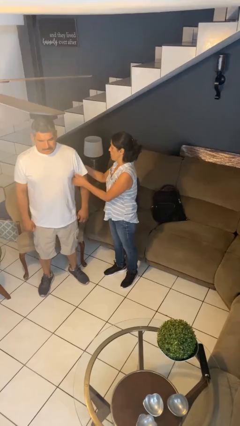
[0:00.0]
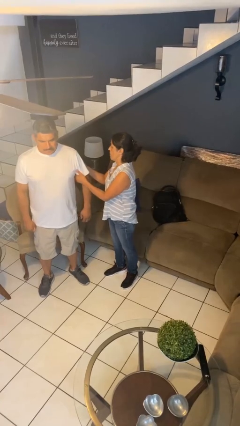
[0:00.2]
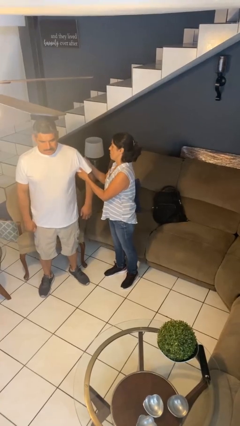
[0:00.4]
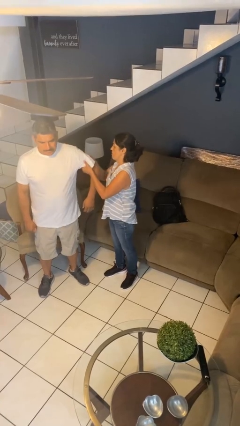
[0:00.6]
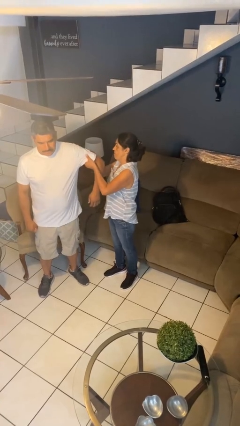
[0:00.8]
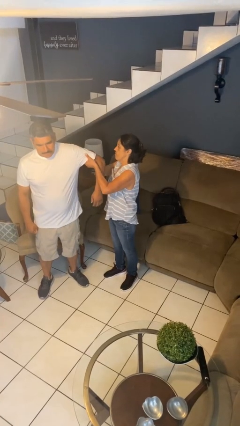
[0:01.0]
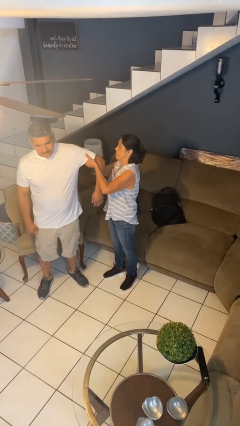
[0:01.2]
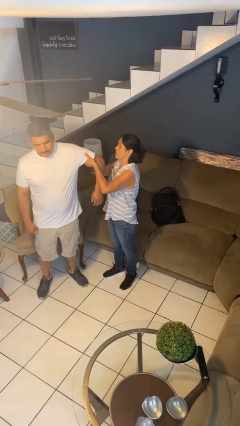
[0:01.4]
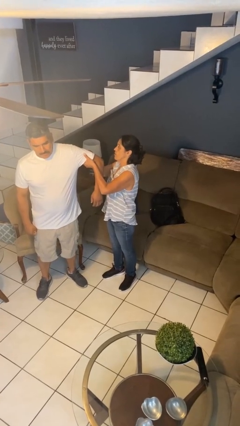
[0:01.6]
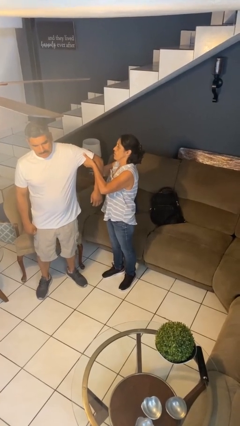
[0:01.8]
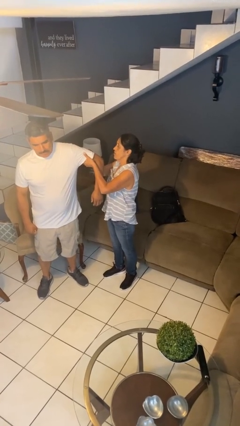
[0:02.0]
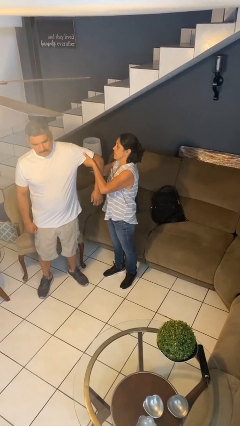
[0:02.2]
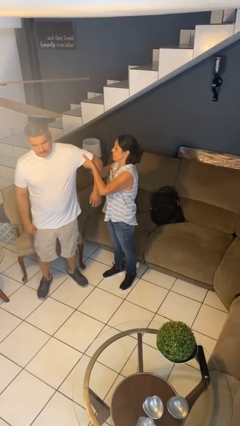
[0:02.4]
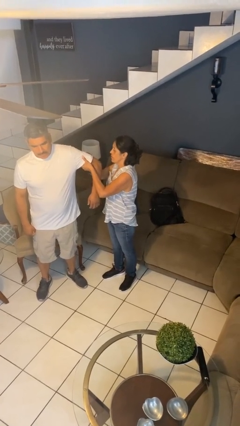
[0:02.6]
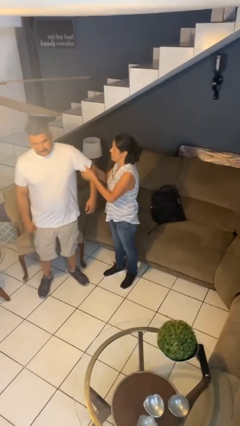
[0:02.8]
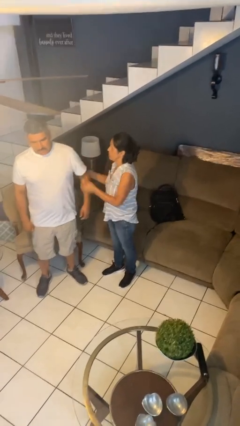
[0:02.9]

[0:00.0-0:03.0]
person grabs person by bicep

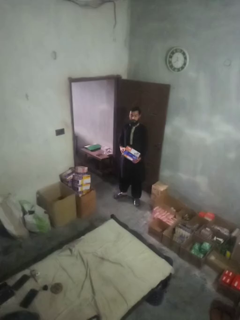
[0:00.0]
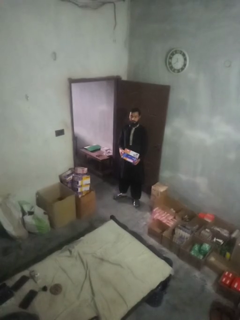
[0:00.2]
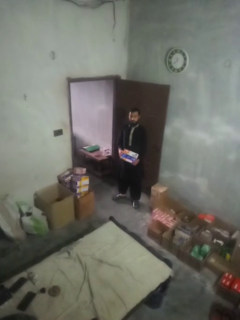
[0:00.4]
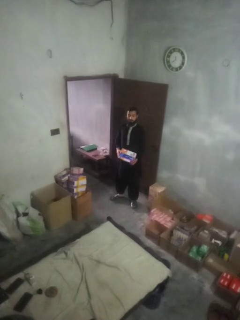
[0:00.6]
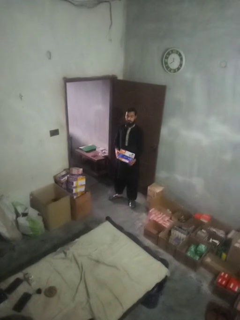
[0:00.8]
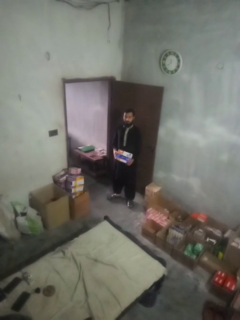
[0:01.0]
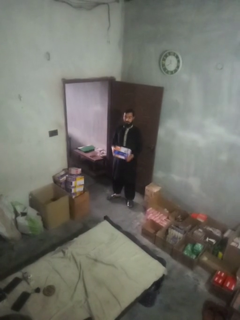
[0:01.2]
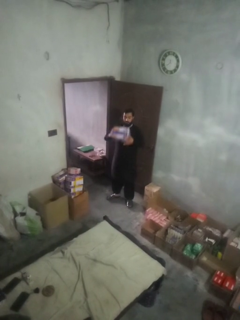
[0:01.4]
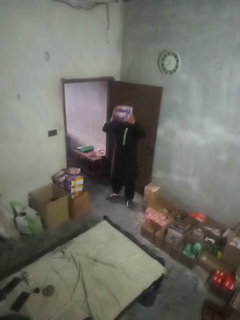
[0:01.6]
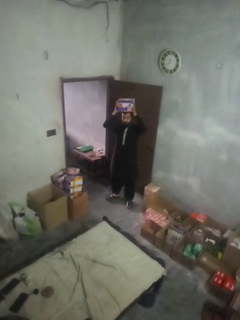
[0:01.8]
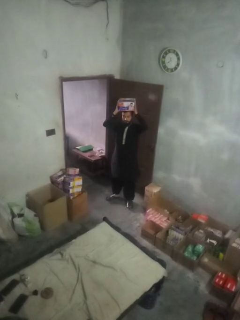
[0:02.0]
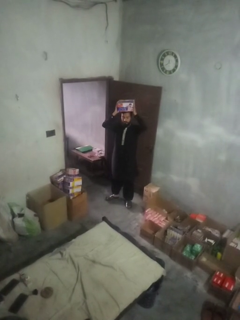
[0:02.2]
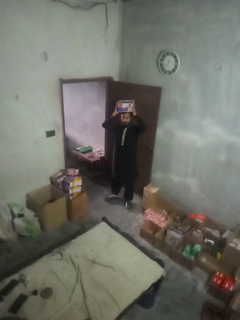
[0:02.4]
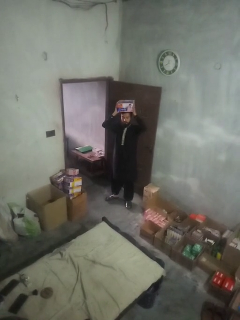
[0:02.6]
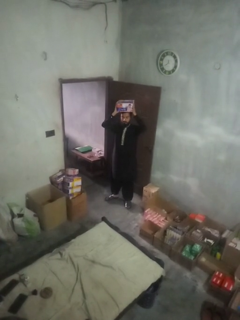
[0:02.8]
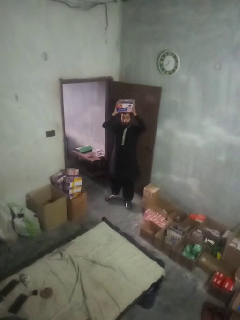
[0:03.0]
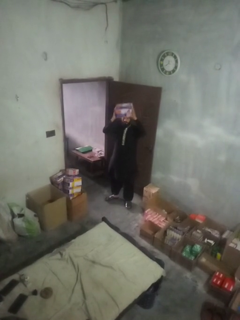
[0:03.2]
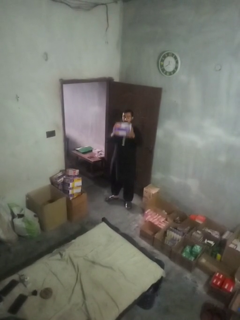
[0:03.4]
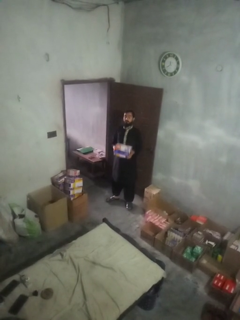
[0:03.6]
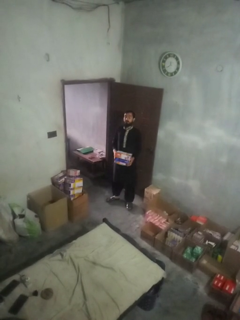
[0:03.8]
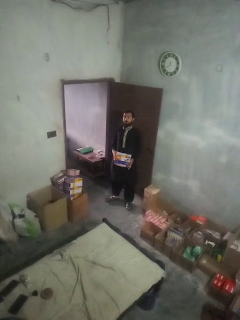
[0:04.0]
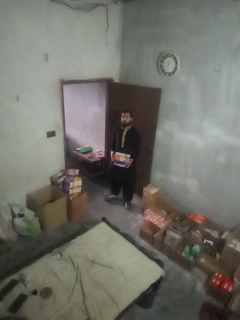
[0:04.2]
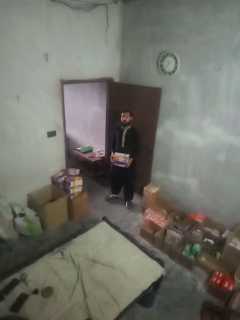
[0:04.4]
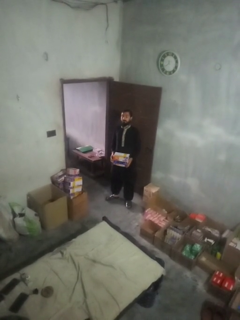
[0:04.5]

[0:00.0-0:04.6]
person holds object above head

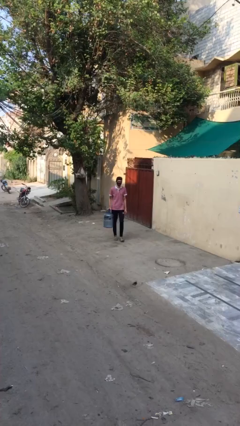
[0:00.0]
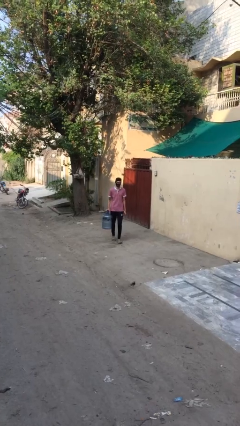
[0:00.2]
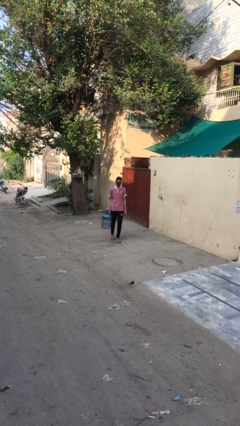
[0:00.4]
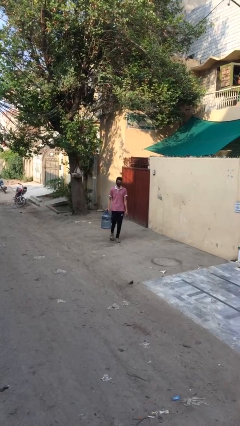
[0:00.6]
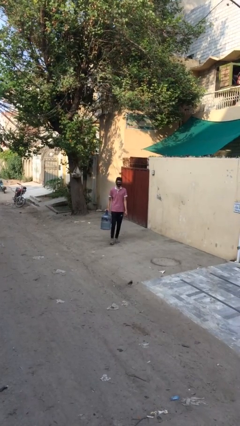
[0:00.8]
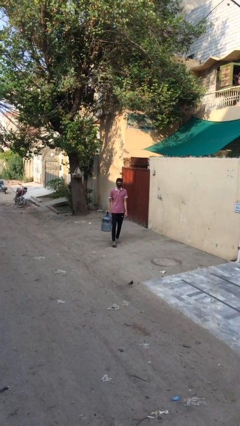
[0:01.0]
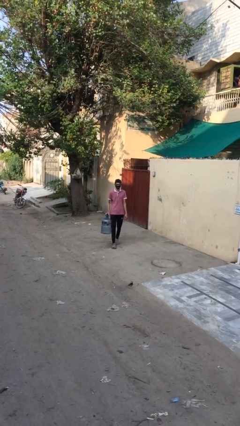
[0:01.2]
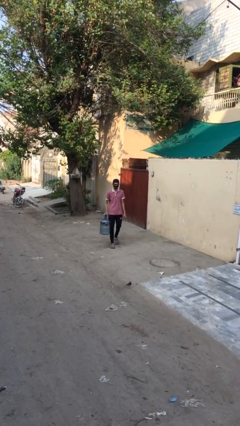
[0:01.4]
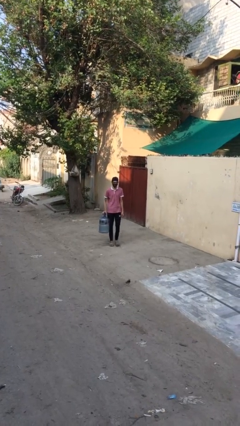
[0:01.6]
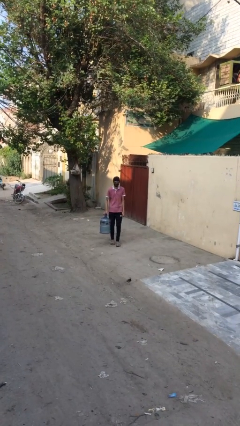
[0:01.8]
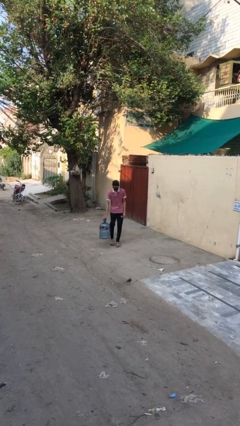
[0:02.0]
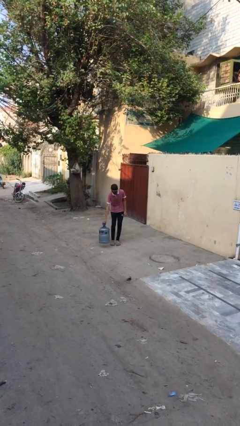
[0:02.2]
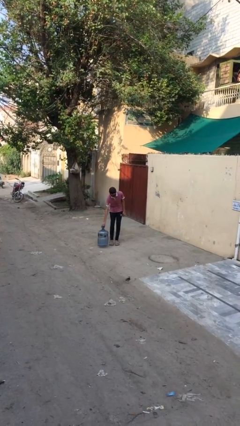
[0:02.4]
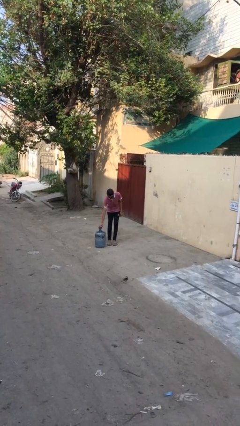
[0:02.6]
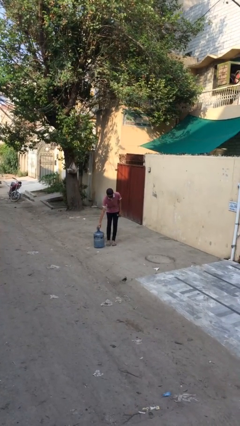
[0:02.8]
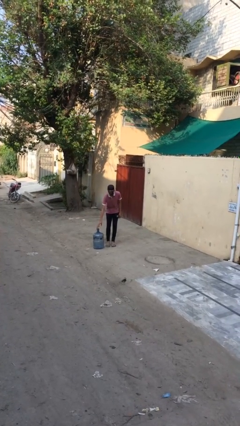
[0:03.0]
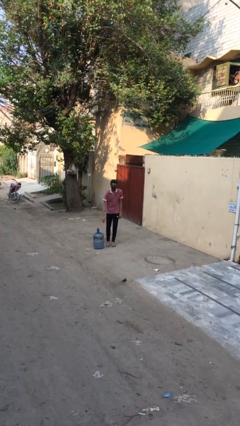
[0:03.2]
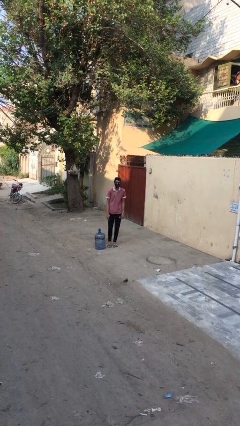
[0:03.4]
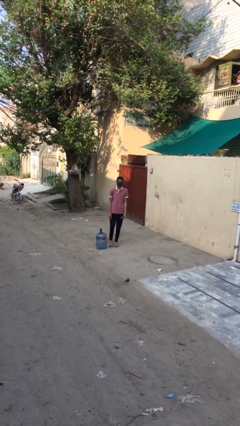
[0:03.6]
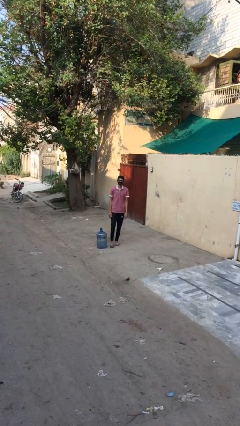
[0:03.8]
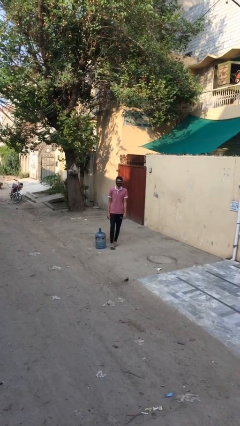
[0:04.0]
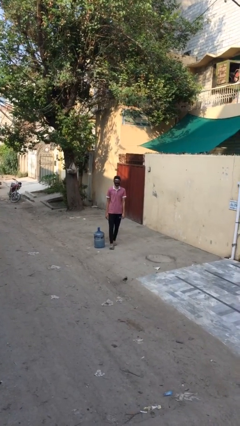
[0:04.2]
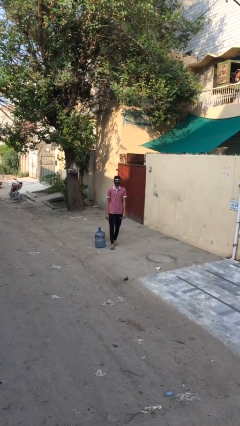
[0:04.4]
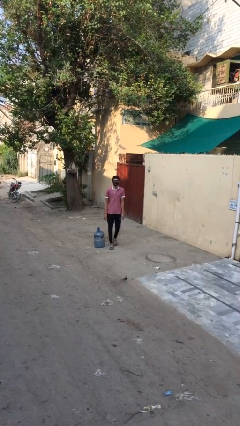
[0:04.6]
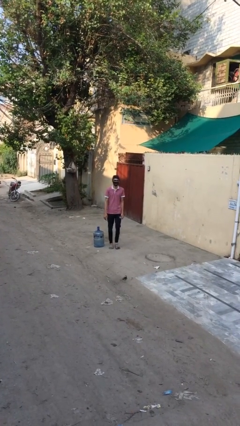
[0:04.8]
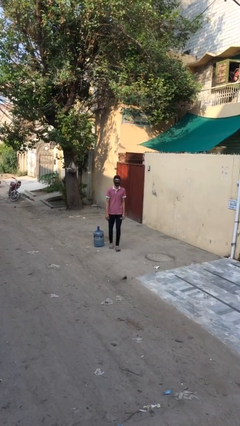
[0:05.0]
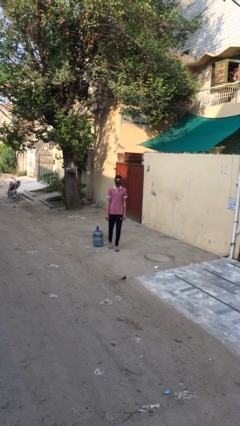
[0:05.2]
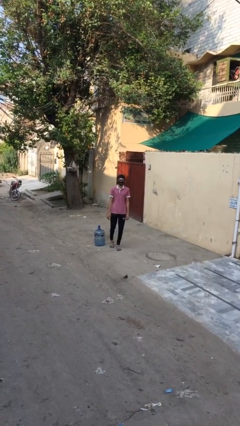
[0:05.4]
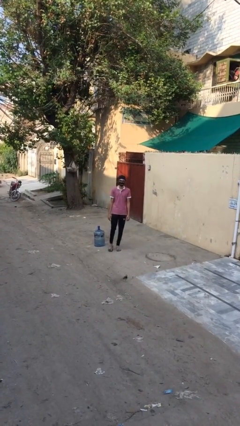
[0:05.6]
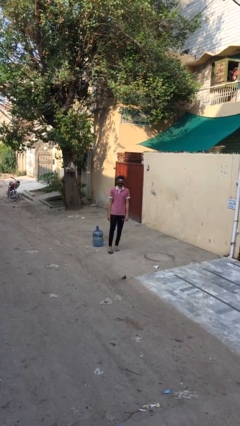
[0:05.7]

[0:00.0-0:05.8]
person puts down object on floor

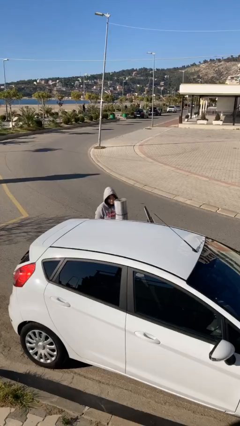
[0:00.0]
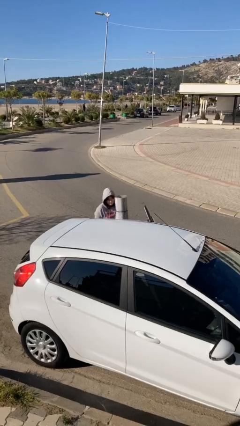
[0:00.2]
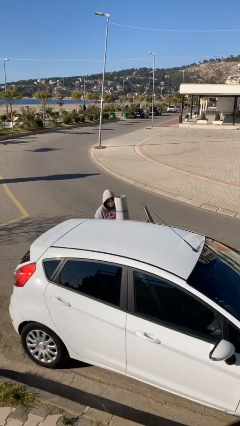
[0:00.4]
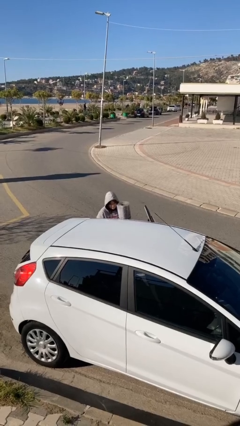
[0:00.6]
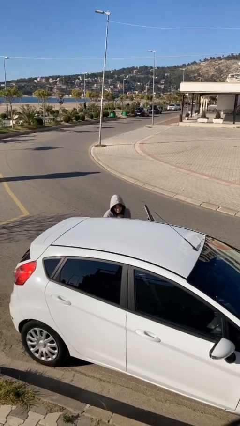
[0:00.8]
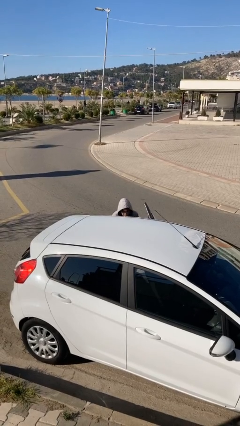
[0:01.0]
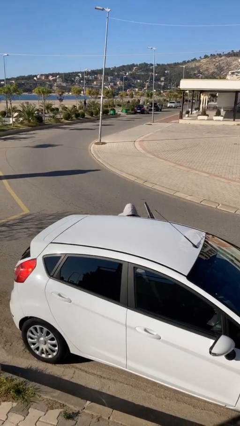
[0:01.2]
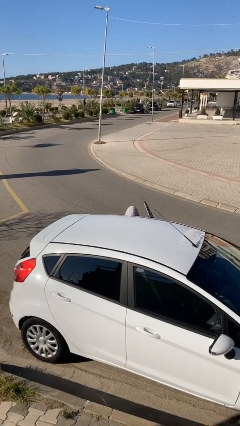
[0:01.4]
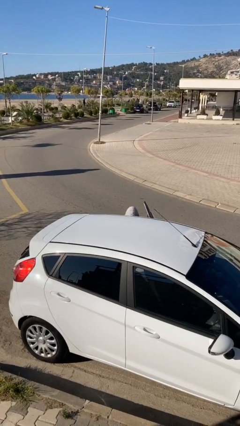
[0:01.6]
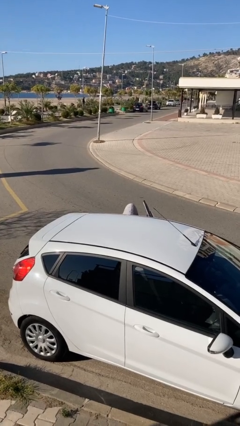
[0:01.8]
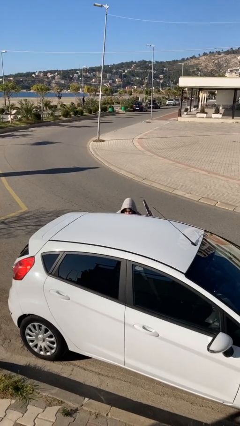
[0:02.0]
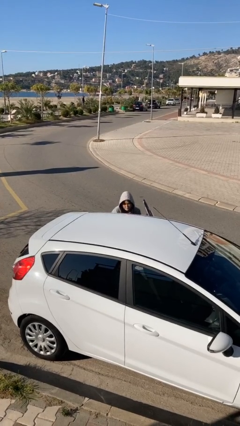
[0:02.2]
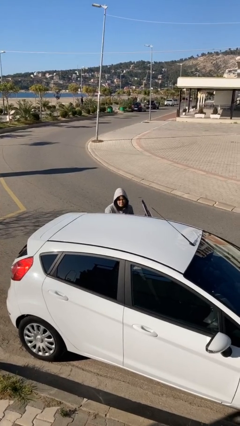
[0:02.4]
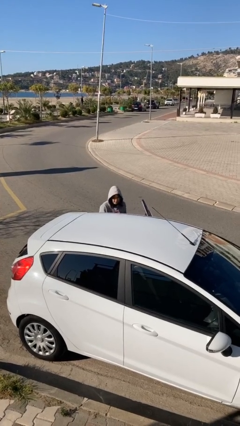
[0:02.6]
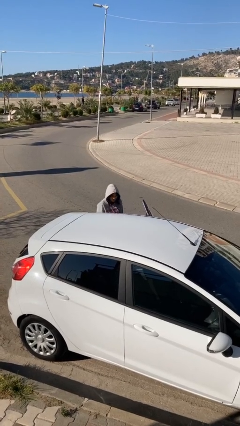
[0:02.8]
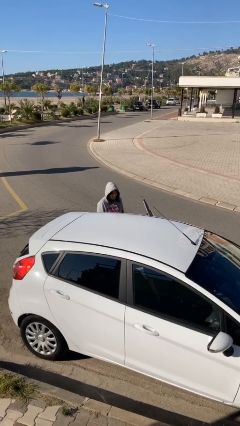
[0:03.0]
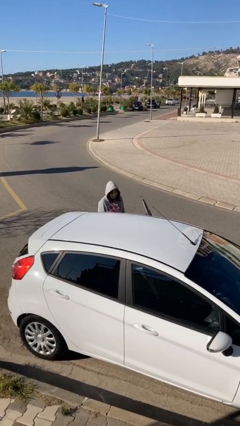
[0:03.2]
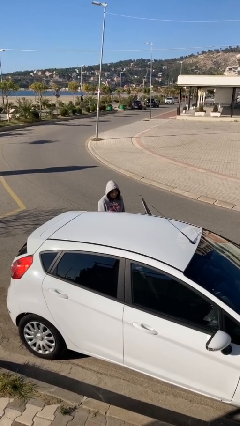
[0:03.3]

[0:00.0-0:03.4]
person loads car

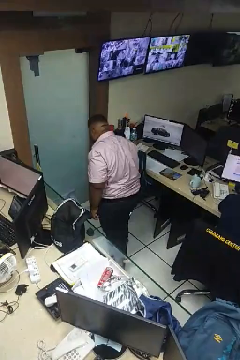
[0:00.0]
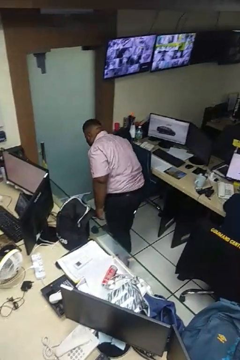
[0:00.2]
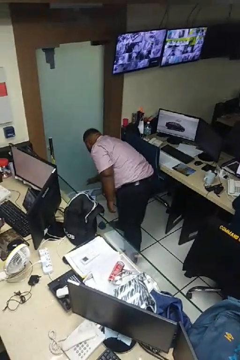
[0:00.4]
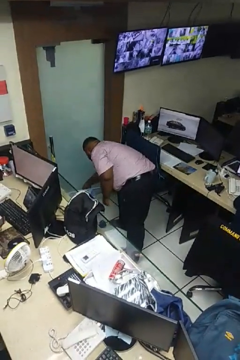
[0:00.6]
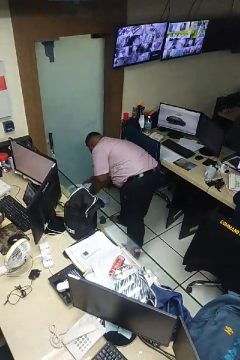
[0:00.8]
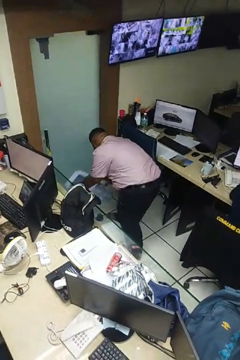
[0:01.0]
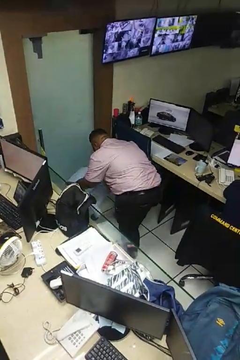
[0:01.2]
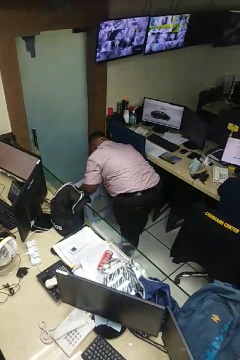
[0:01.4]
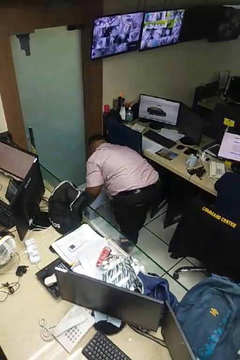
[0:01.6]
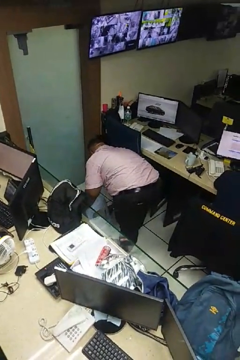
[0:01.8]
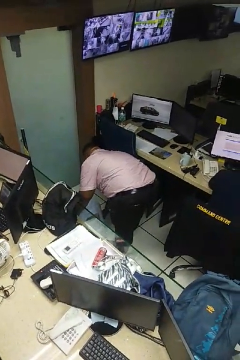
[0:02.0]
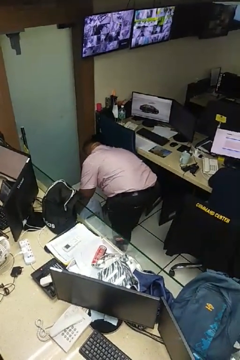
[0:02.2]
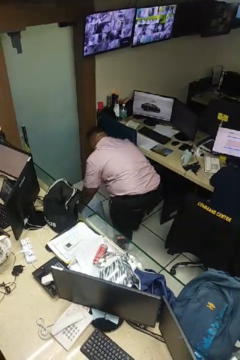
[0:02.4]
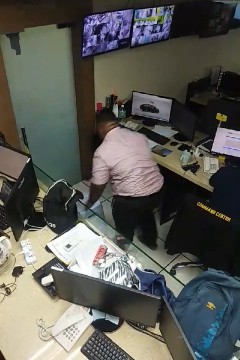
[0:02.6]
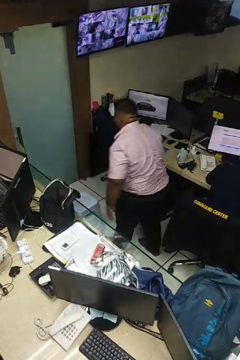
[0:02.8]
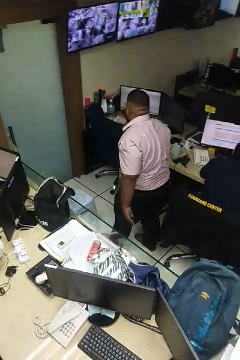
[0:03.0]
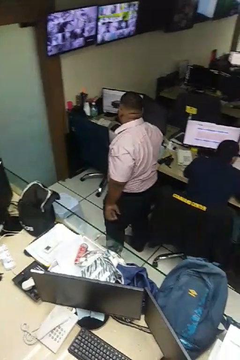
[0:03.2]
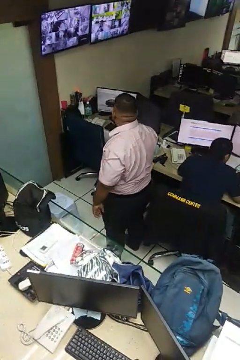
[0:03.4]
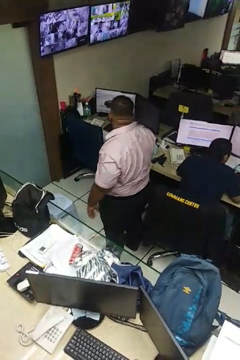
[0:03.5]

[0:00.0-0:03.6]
person sets upright furniture
